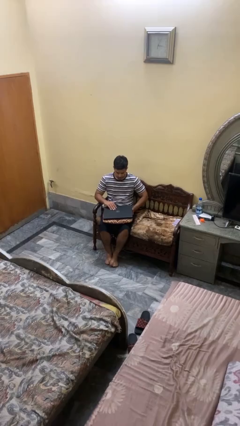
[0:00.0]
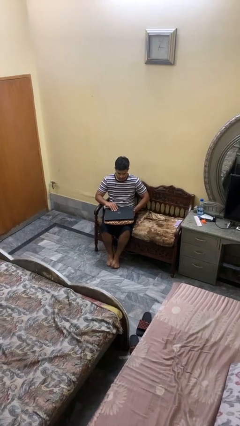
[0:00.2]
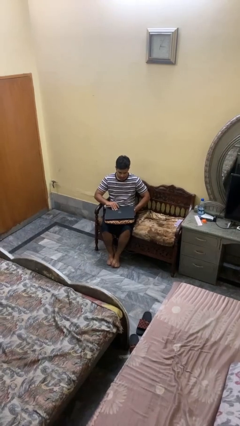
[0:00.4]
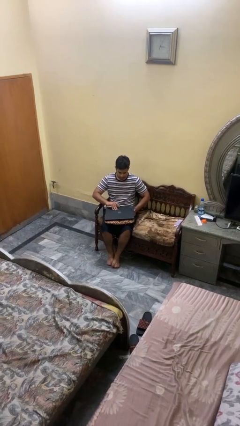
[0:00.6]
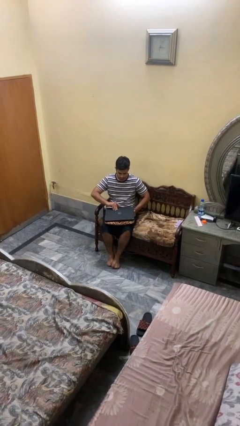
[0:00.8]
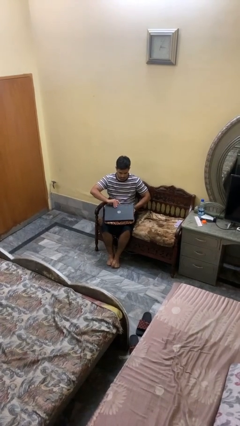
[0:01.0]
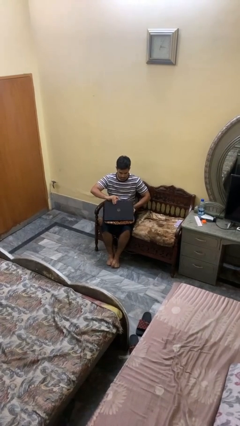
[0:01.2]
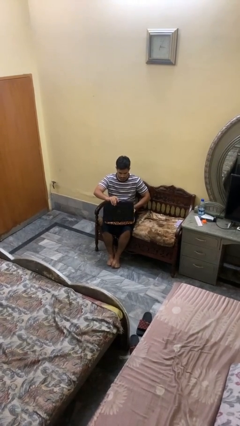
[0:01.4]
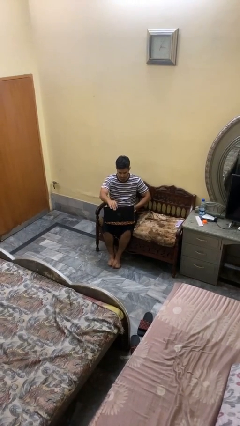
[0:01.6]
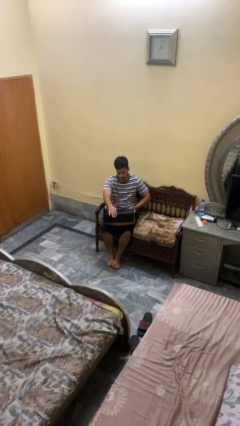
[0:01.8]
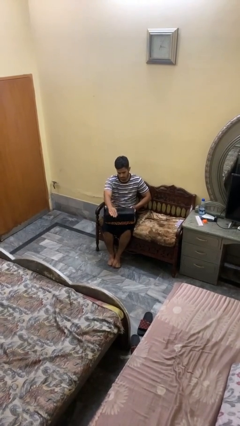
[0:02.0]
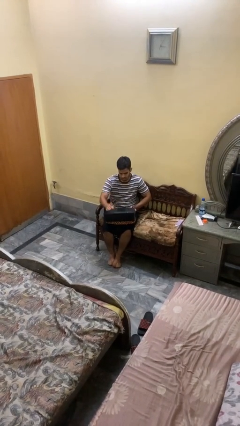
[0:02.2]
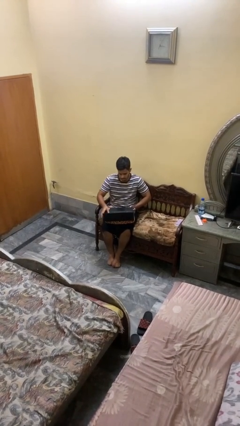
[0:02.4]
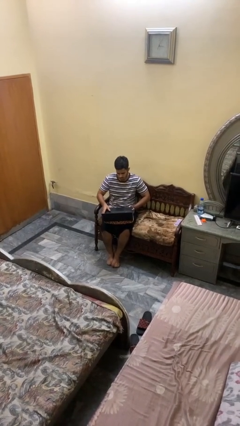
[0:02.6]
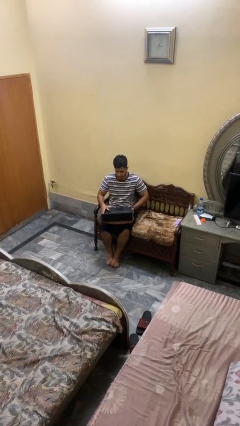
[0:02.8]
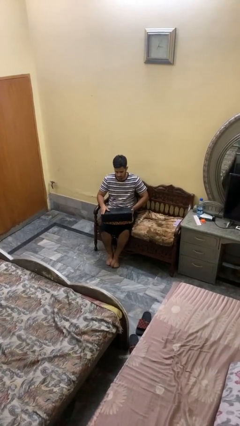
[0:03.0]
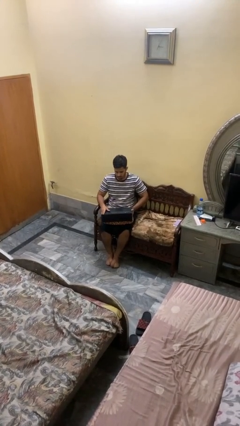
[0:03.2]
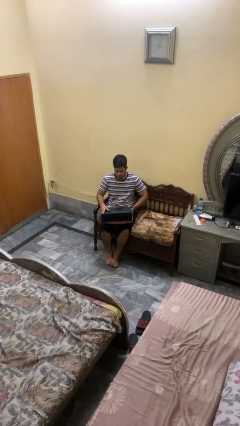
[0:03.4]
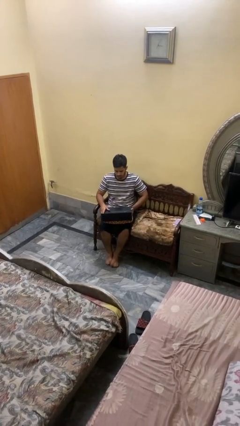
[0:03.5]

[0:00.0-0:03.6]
person opens laptop

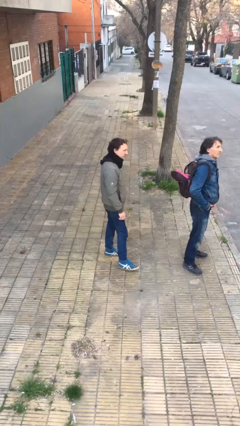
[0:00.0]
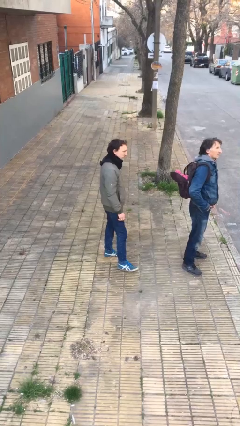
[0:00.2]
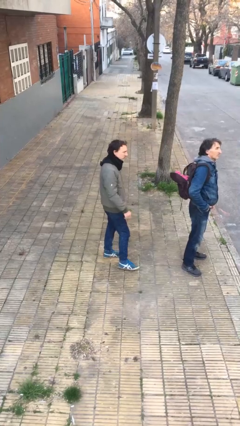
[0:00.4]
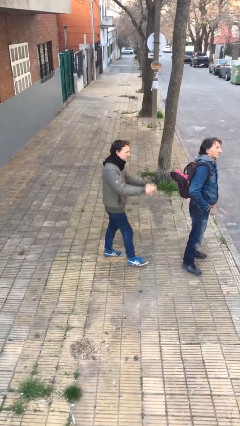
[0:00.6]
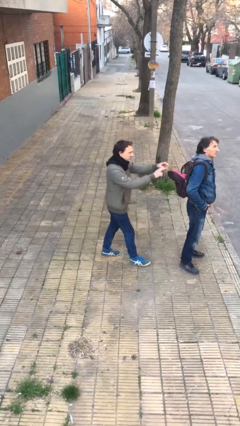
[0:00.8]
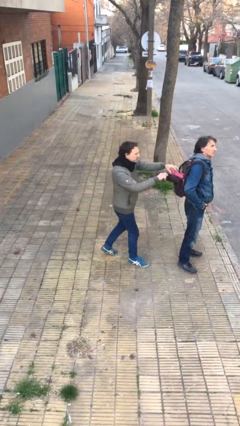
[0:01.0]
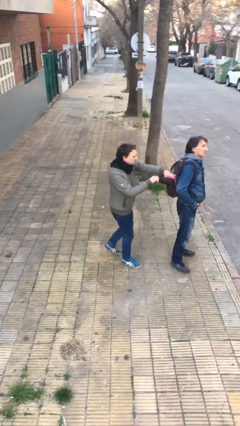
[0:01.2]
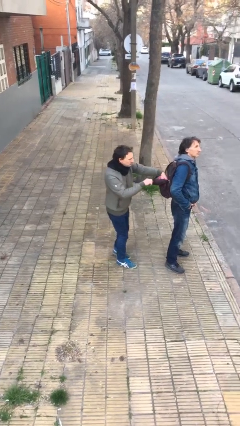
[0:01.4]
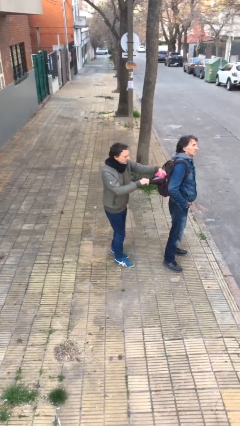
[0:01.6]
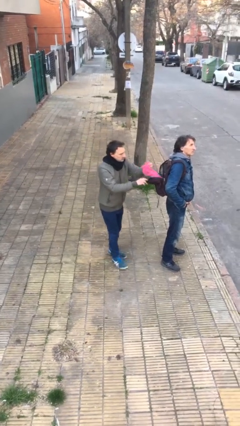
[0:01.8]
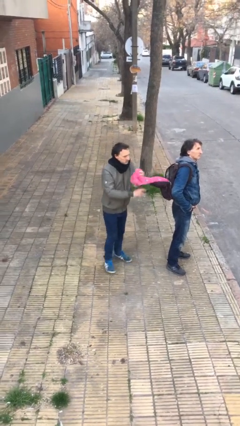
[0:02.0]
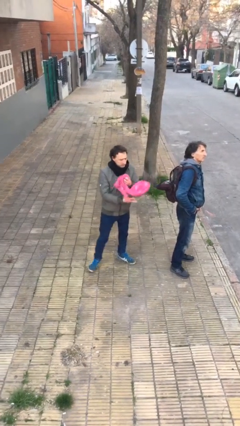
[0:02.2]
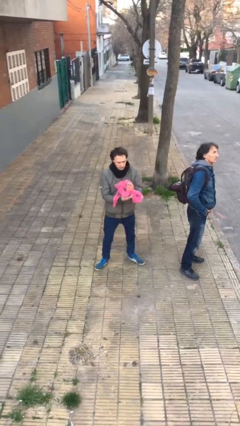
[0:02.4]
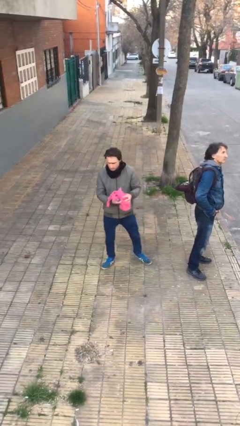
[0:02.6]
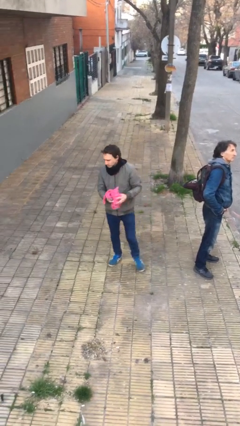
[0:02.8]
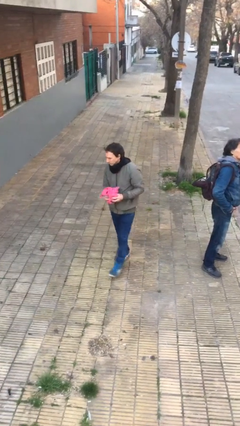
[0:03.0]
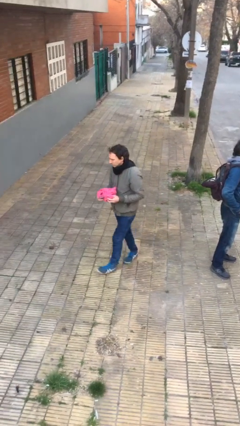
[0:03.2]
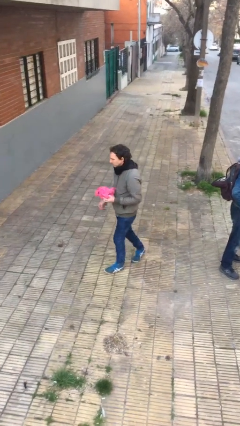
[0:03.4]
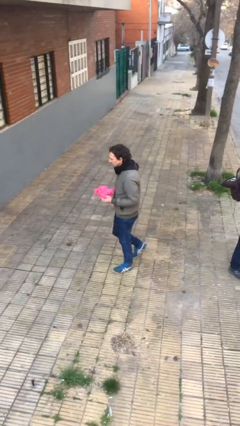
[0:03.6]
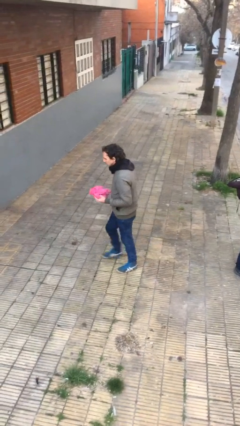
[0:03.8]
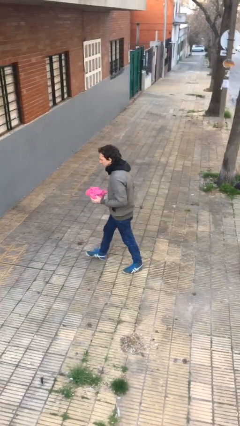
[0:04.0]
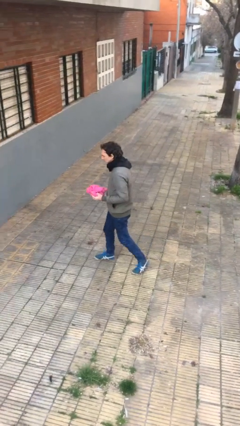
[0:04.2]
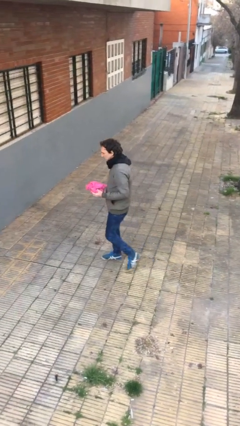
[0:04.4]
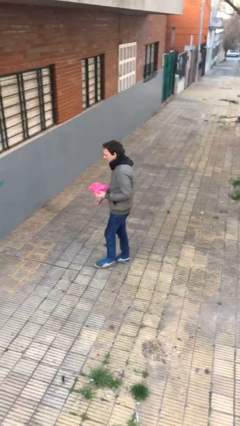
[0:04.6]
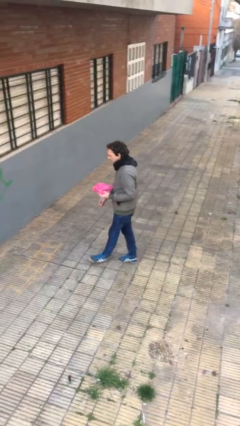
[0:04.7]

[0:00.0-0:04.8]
person steals object from person

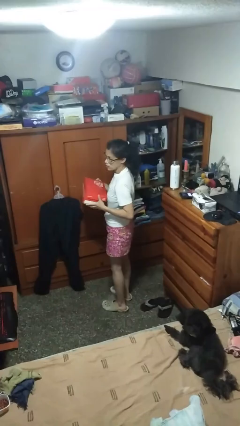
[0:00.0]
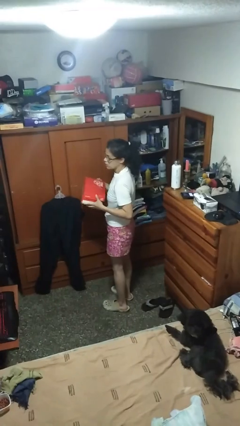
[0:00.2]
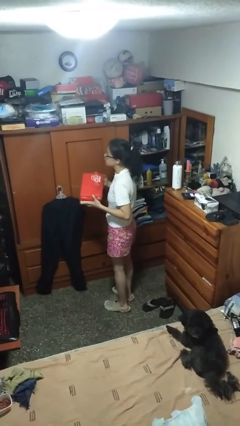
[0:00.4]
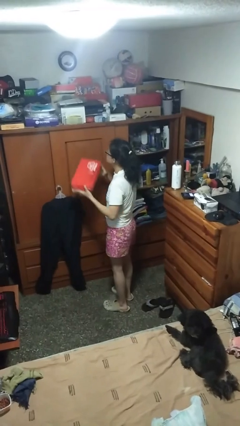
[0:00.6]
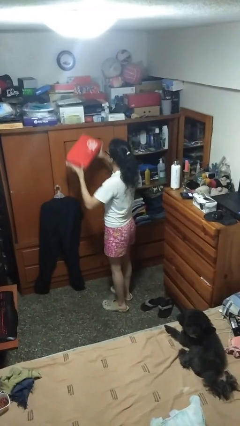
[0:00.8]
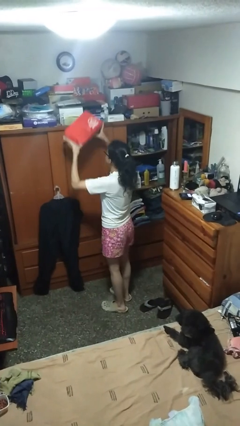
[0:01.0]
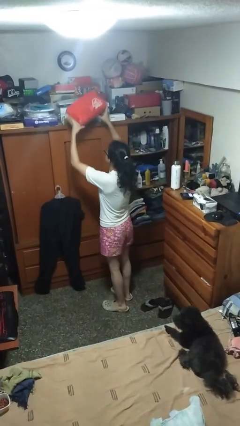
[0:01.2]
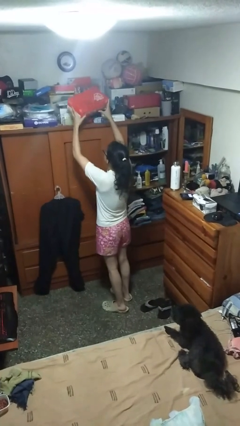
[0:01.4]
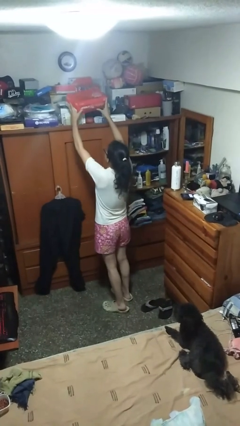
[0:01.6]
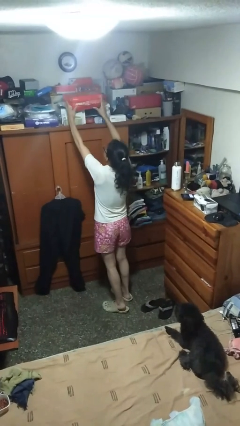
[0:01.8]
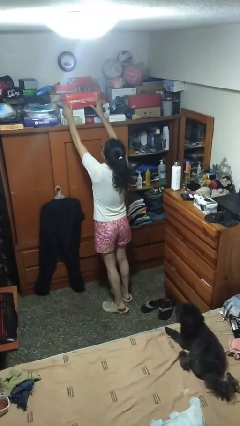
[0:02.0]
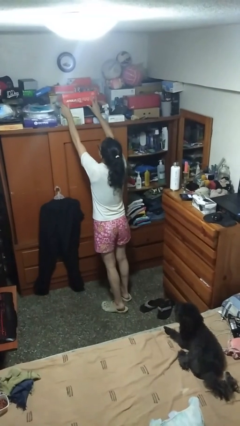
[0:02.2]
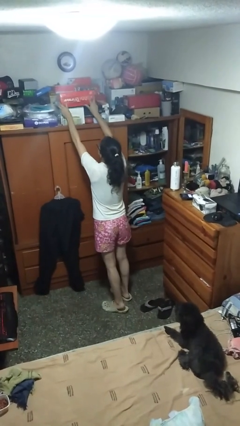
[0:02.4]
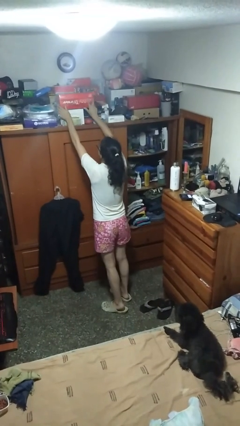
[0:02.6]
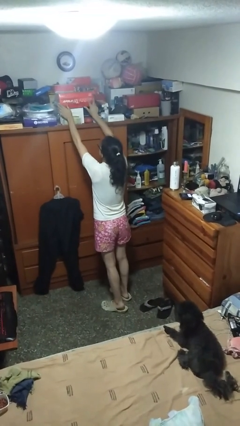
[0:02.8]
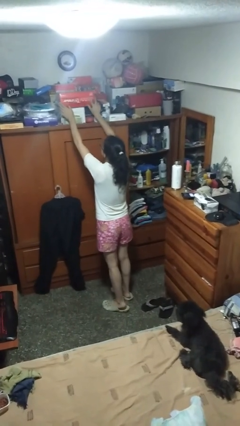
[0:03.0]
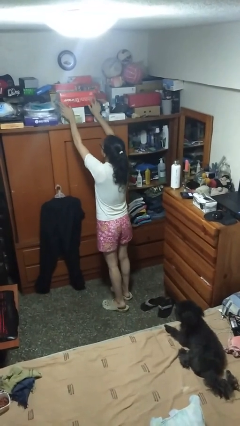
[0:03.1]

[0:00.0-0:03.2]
person puts down object on shelf

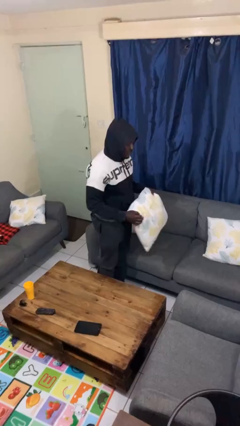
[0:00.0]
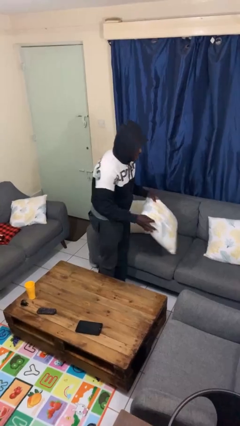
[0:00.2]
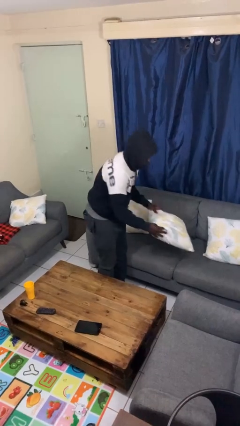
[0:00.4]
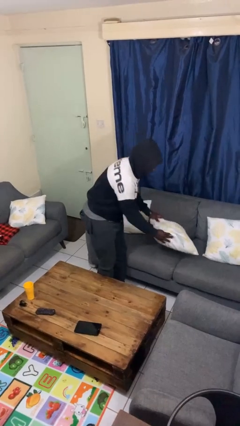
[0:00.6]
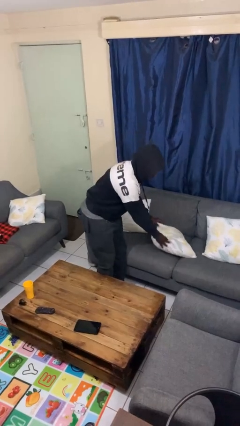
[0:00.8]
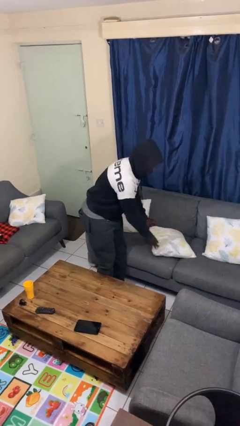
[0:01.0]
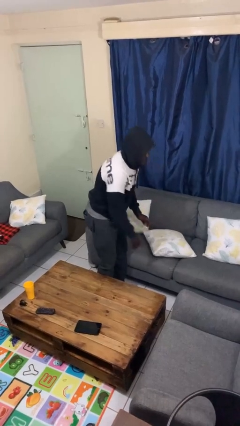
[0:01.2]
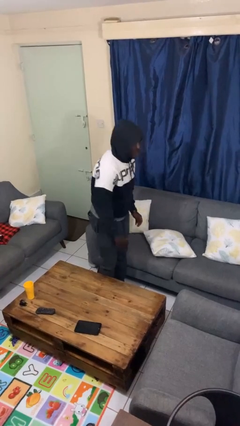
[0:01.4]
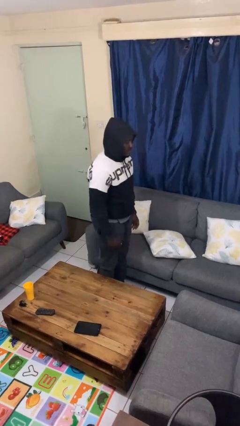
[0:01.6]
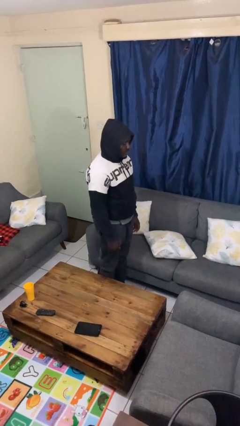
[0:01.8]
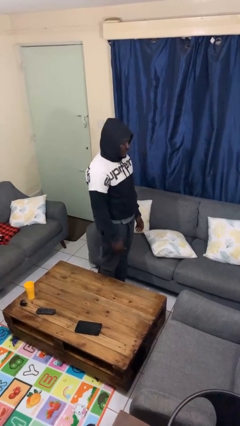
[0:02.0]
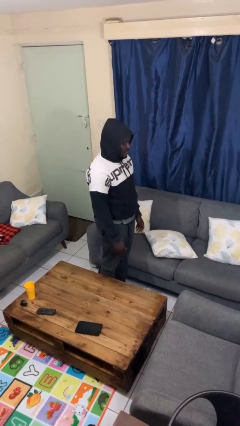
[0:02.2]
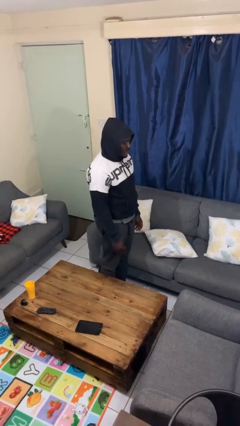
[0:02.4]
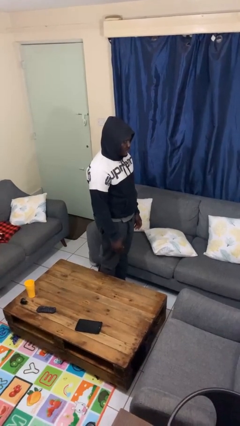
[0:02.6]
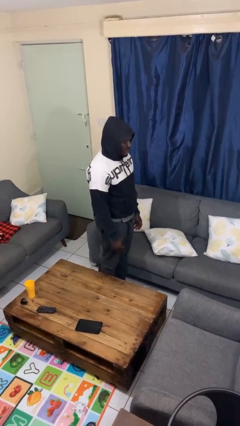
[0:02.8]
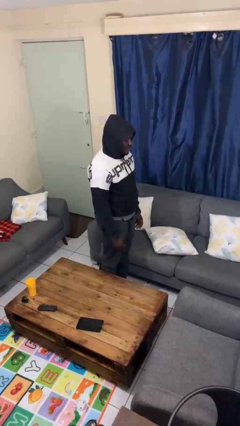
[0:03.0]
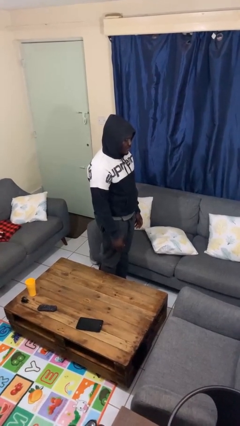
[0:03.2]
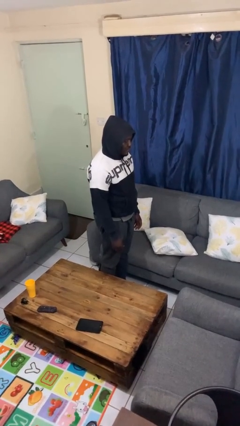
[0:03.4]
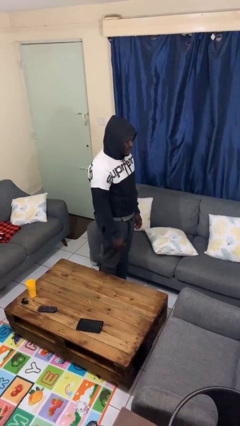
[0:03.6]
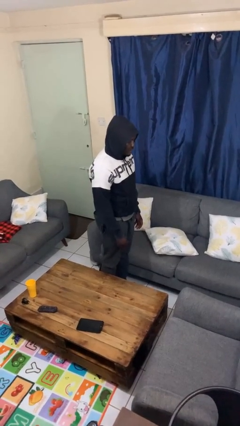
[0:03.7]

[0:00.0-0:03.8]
person puts down object on couch

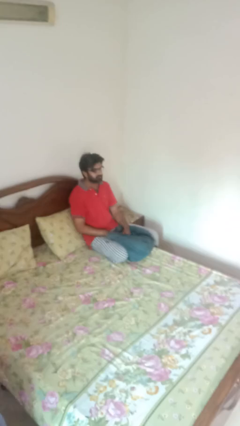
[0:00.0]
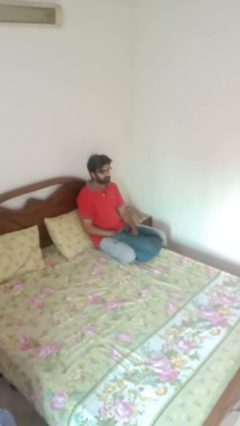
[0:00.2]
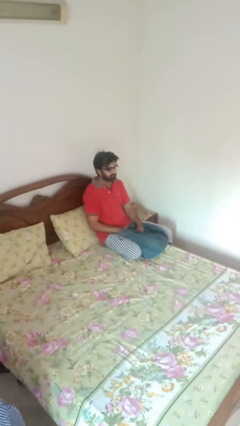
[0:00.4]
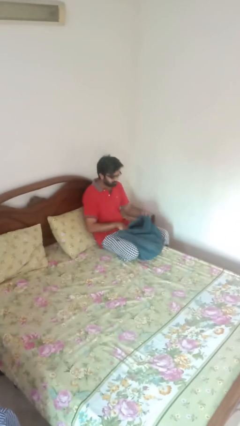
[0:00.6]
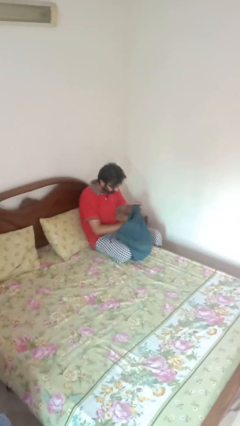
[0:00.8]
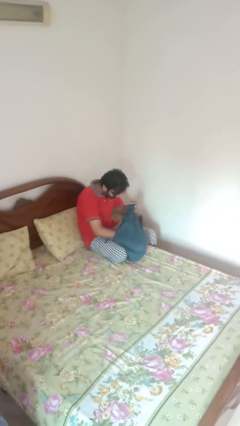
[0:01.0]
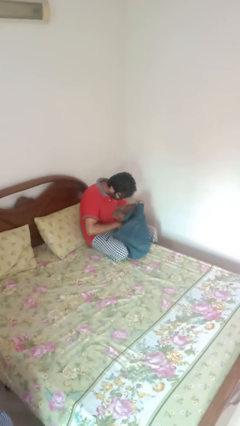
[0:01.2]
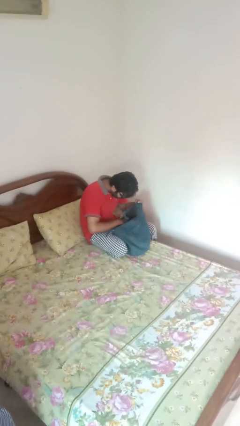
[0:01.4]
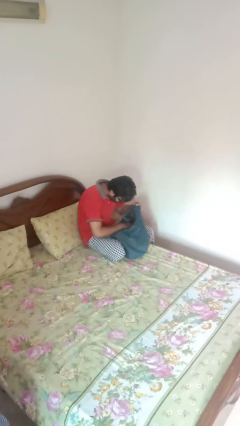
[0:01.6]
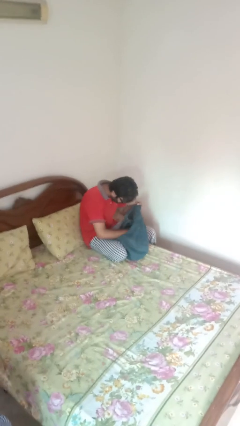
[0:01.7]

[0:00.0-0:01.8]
person searches in bag

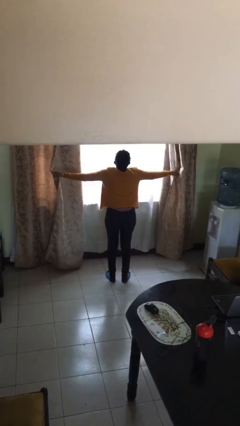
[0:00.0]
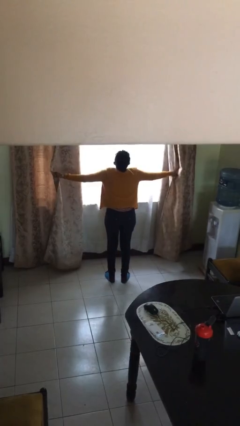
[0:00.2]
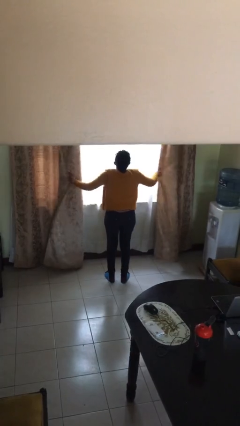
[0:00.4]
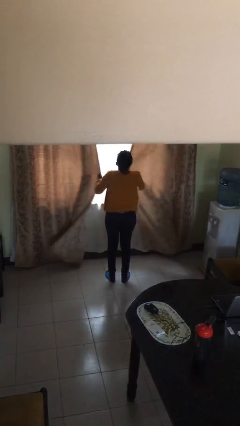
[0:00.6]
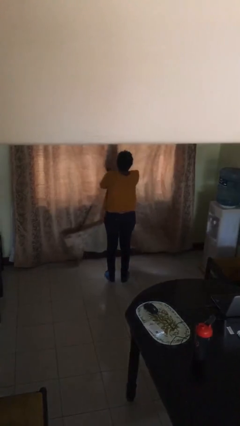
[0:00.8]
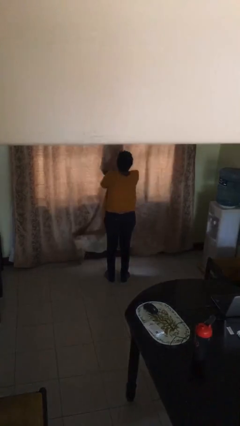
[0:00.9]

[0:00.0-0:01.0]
person closes curtains
